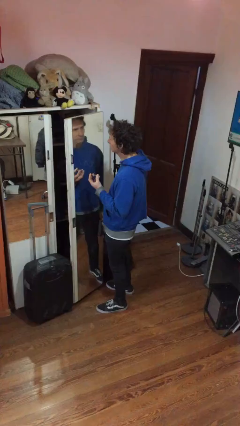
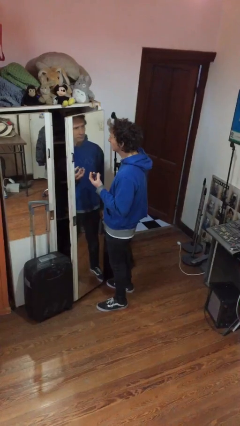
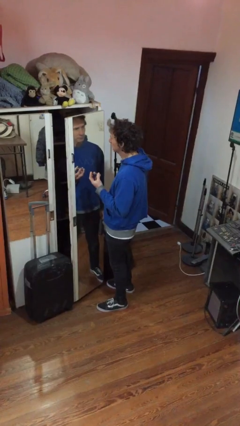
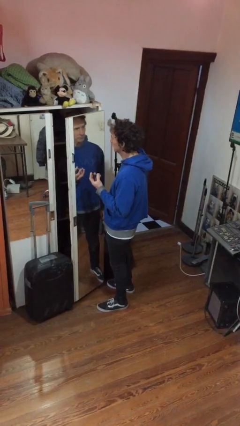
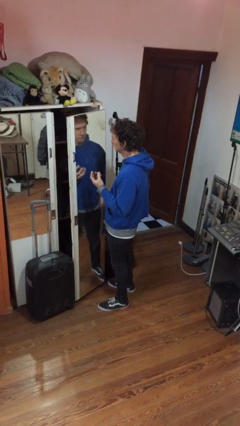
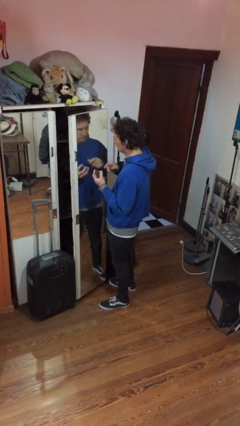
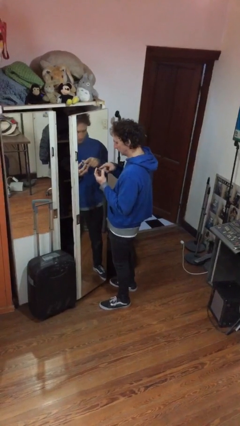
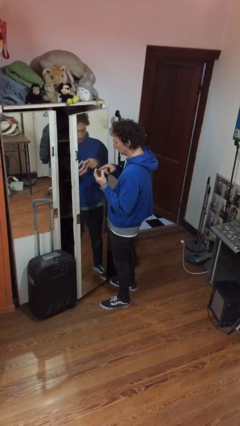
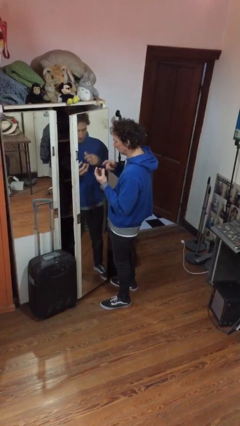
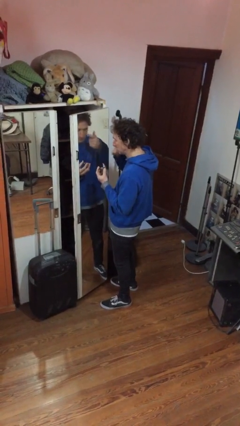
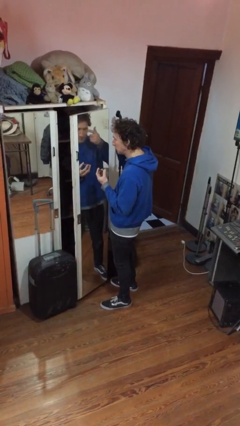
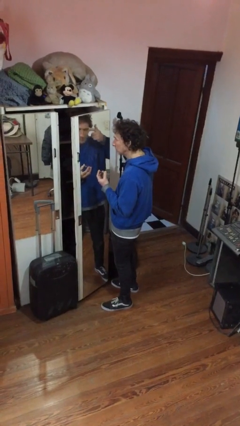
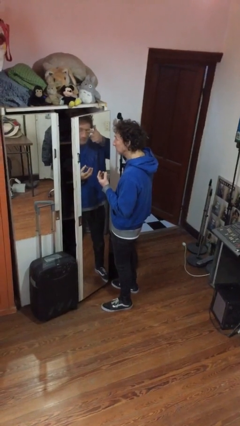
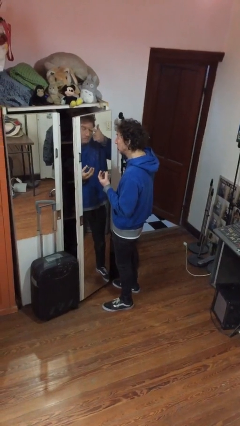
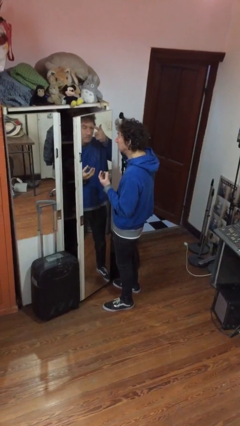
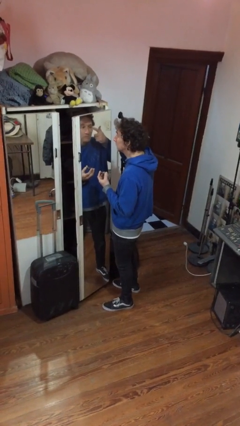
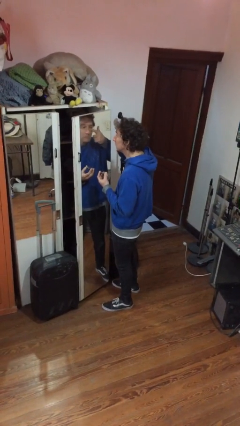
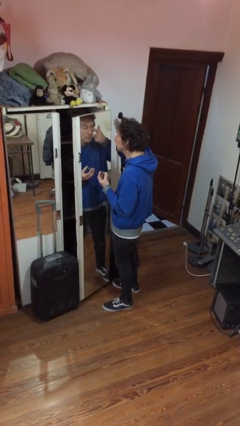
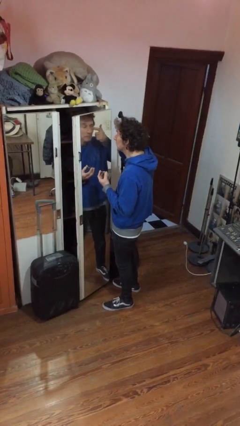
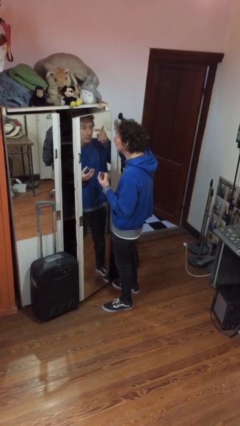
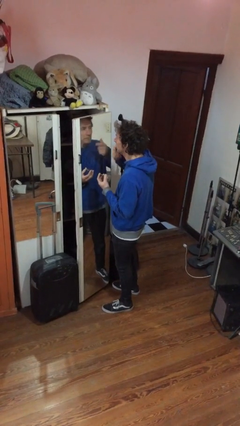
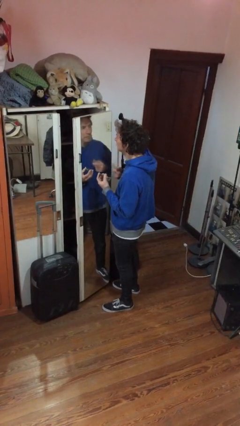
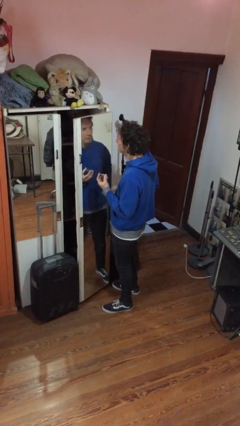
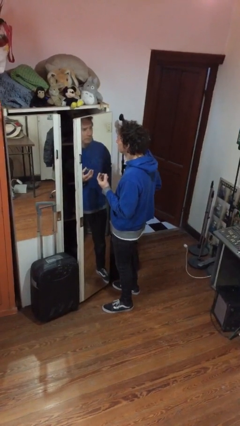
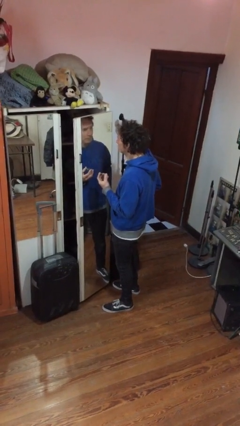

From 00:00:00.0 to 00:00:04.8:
person applies eye makeup

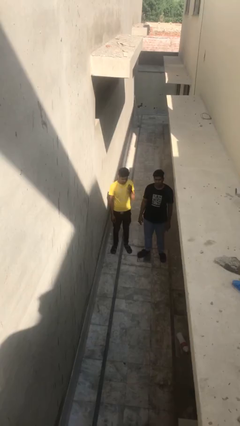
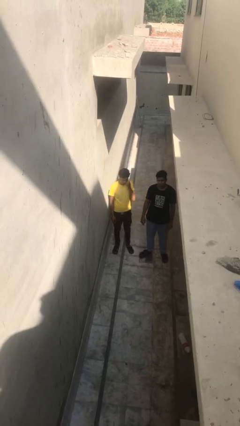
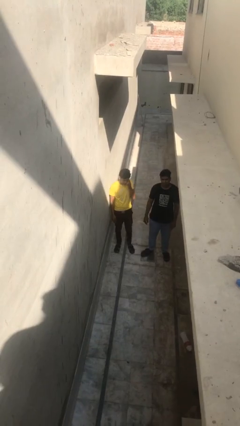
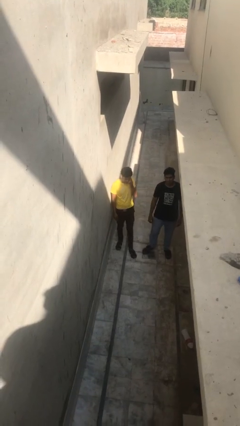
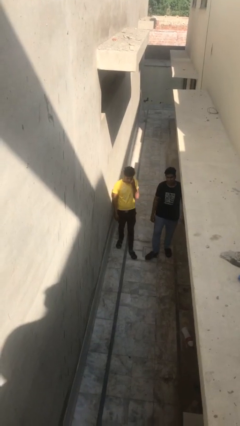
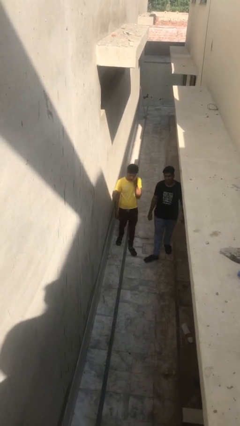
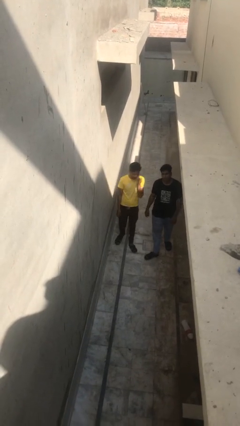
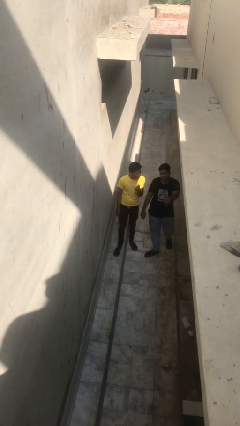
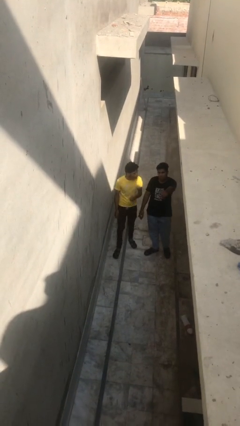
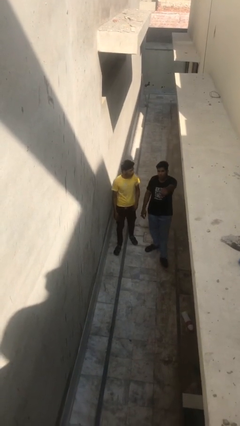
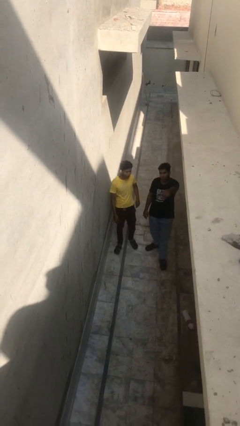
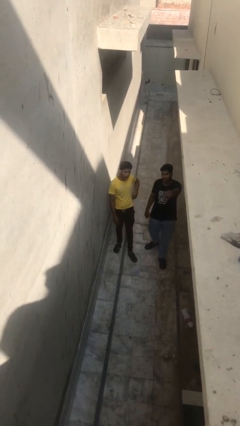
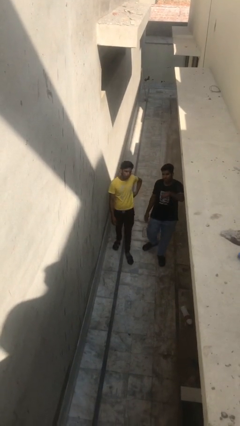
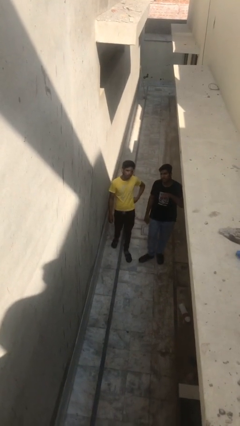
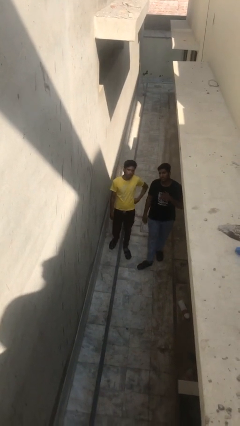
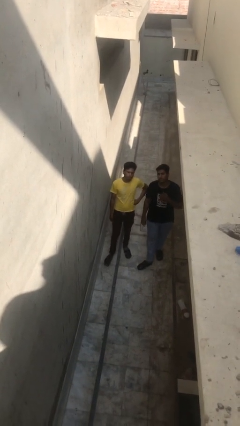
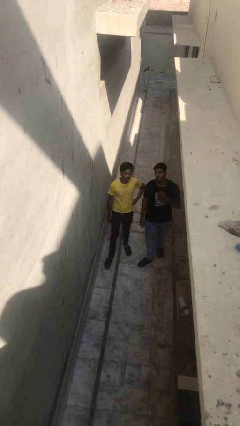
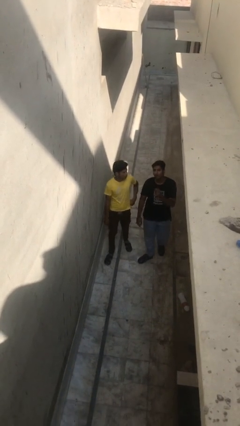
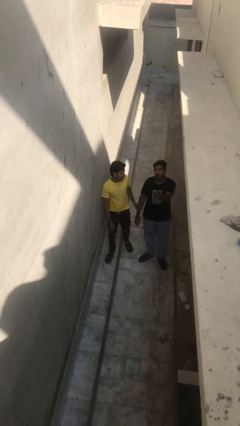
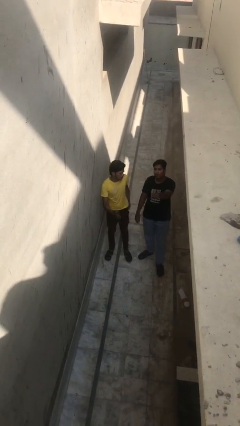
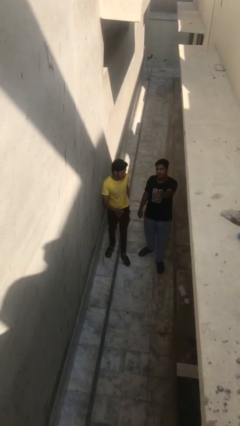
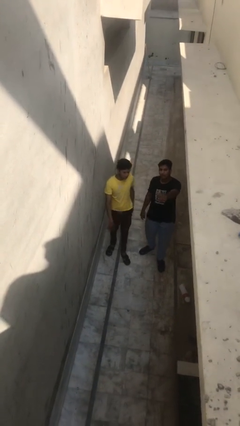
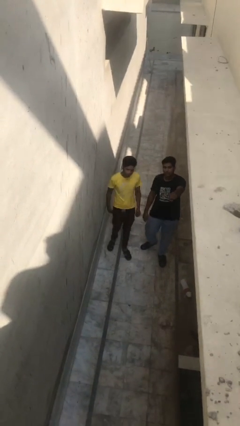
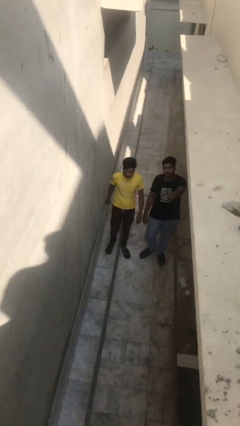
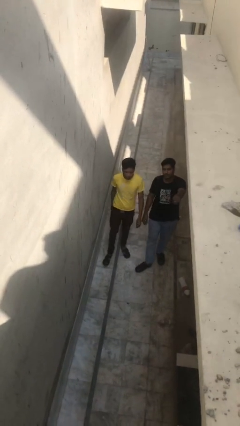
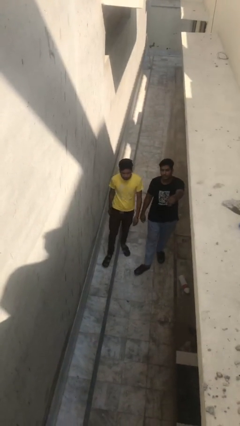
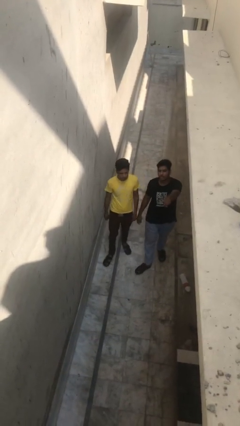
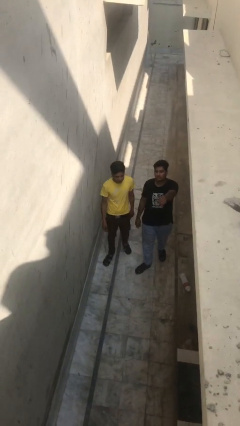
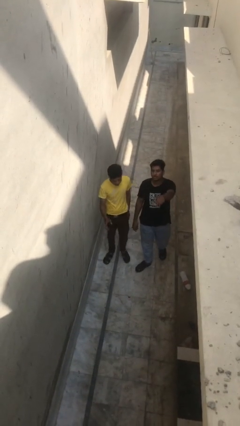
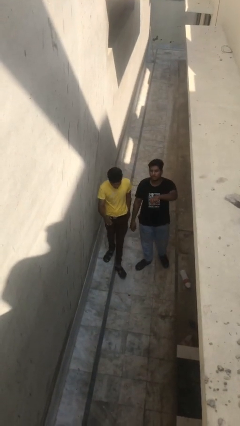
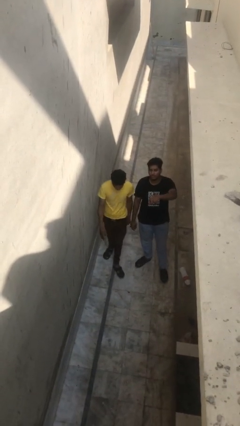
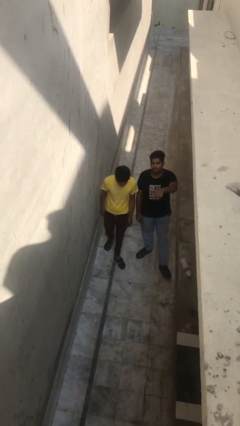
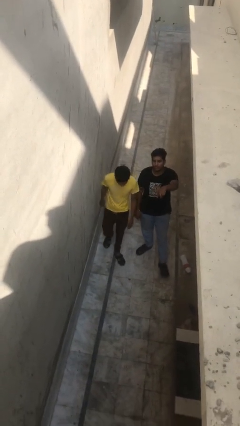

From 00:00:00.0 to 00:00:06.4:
person talks to person

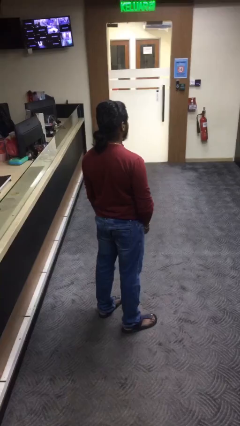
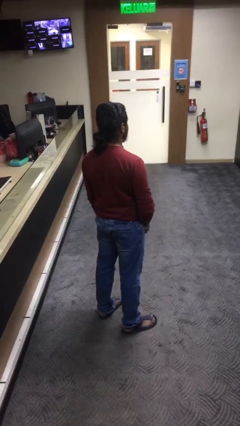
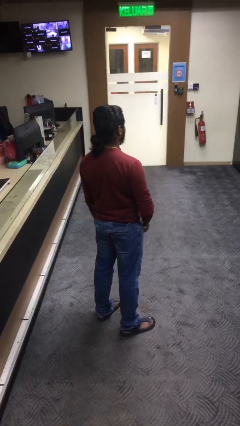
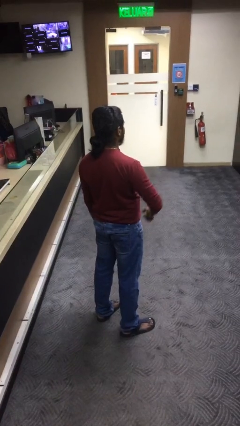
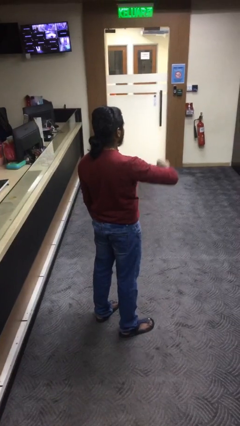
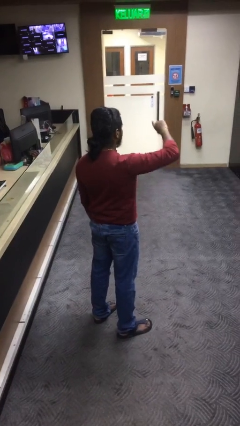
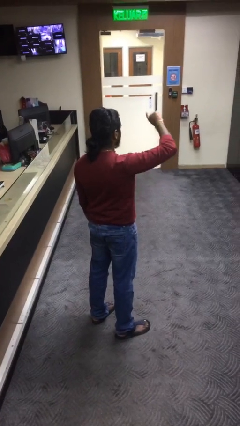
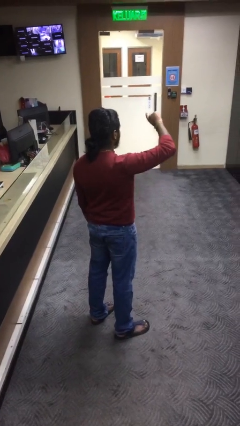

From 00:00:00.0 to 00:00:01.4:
person gestures swipe up

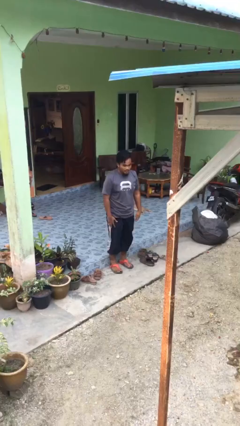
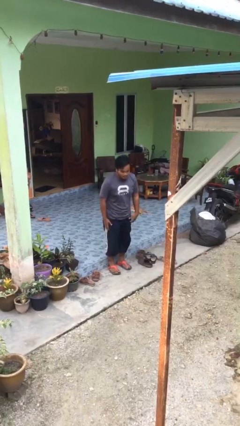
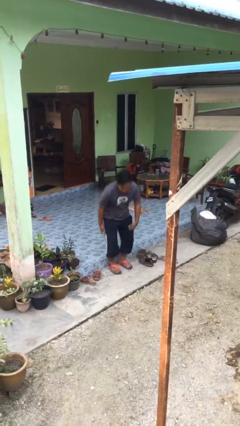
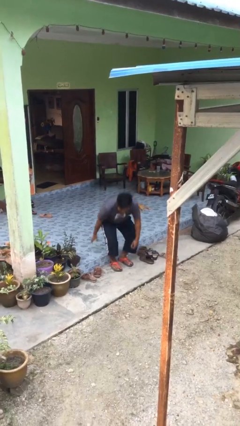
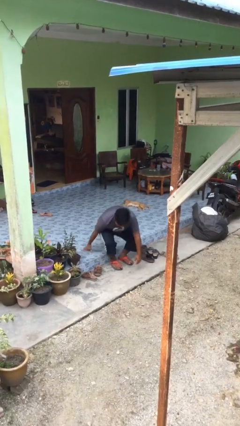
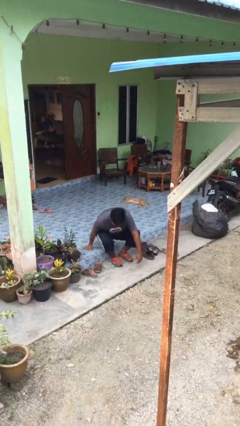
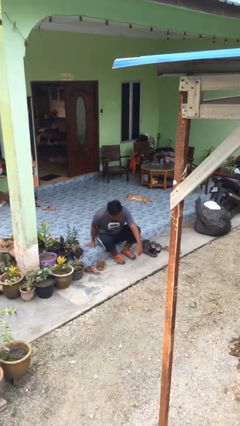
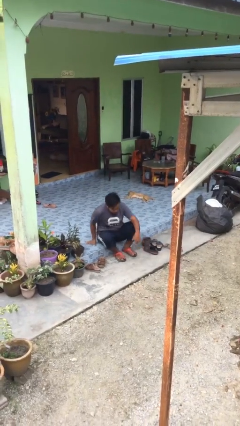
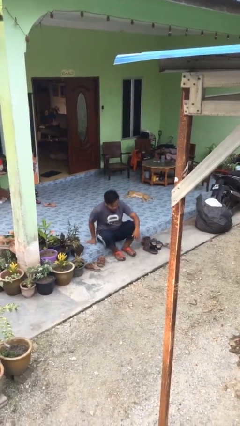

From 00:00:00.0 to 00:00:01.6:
person sits down

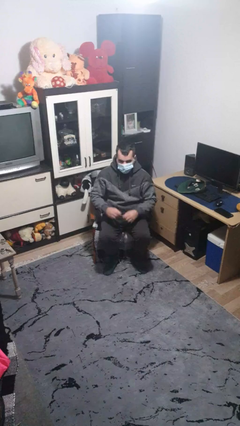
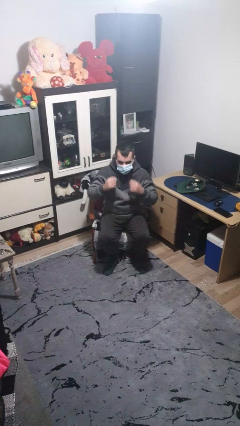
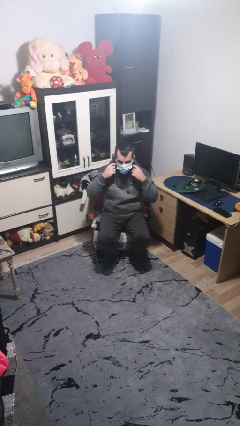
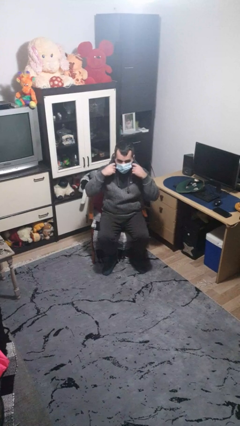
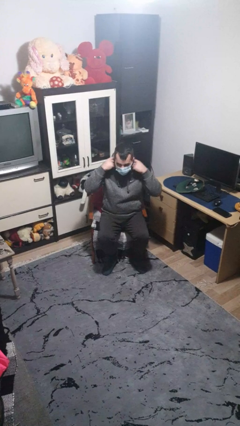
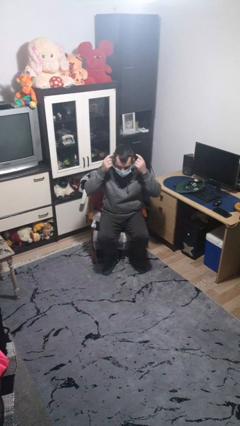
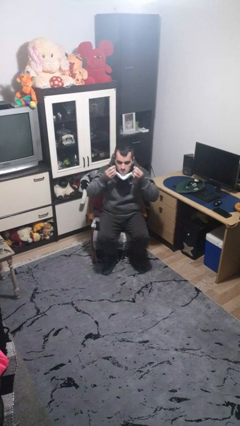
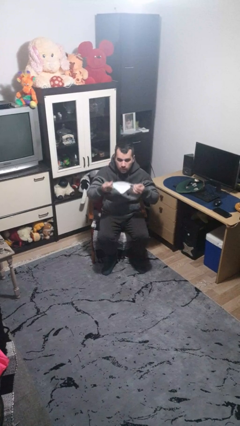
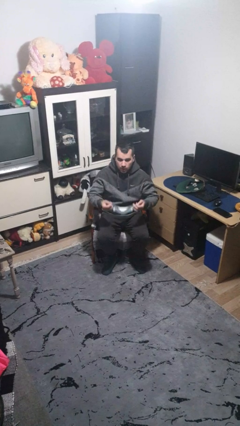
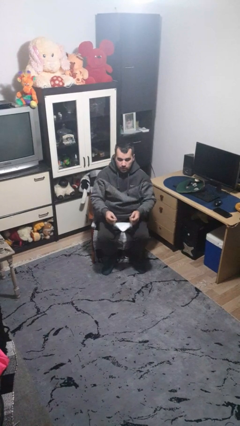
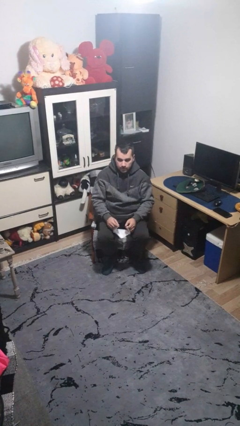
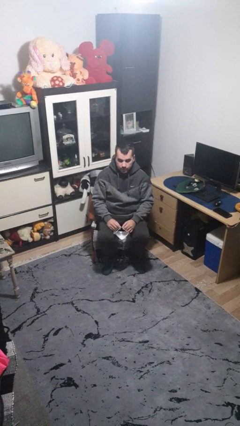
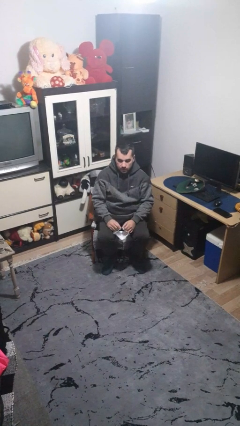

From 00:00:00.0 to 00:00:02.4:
person takes off facemask

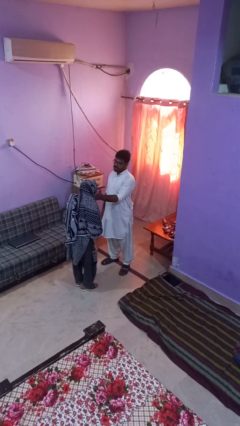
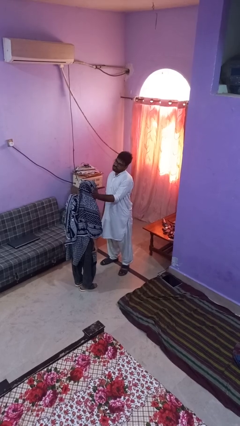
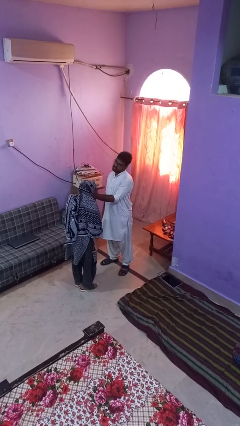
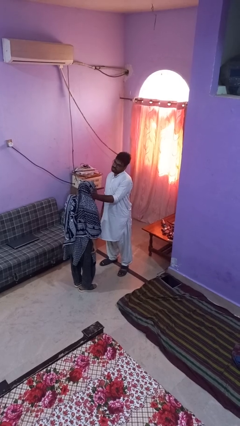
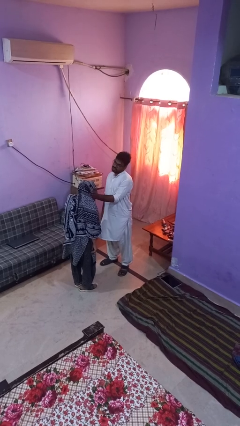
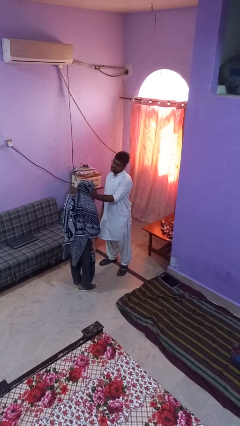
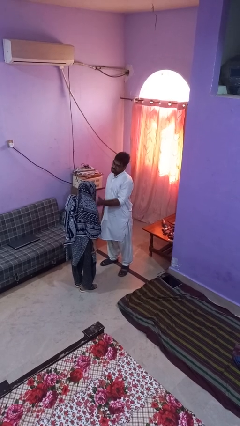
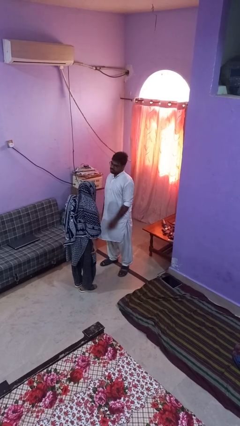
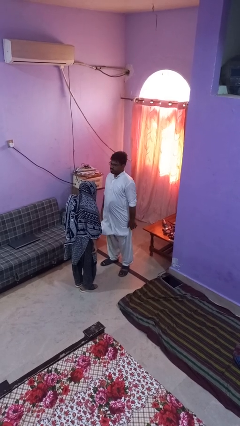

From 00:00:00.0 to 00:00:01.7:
person touches face of person
